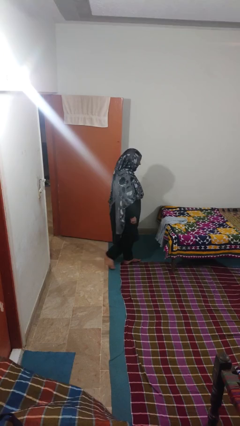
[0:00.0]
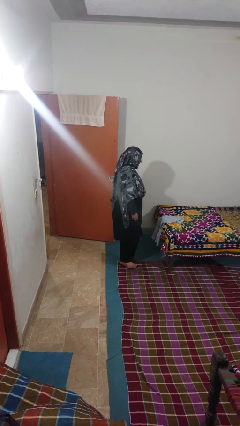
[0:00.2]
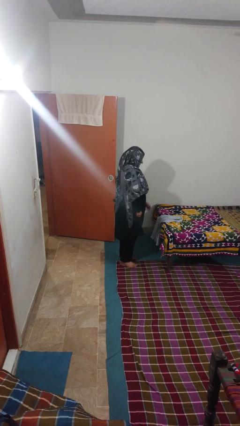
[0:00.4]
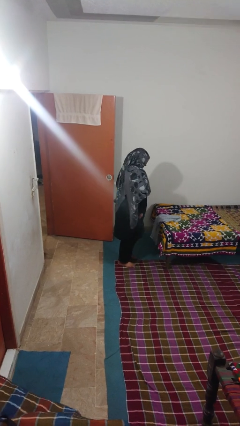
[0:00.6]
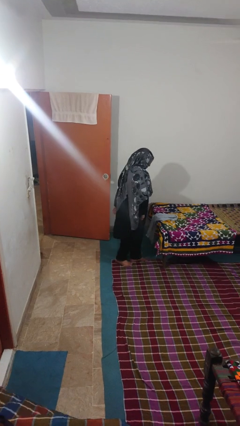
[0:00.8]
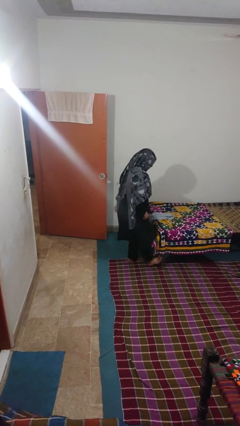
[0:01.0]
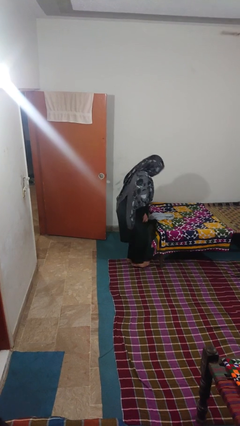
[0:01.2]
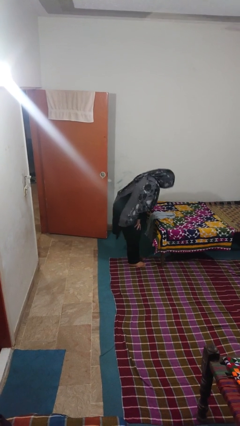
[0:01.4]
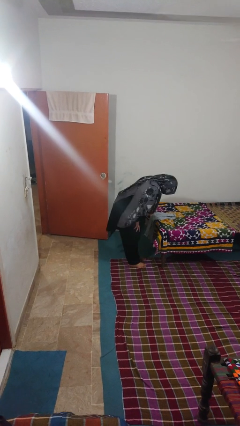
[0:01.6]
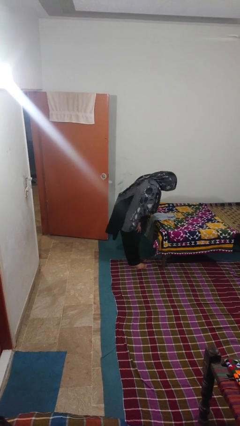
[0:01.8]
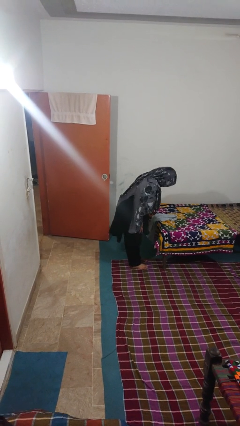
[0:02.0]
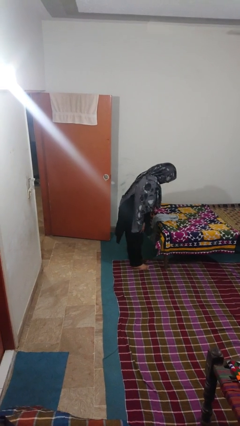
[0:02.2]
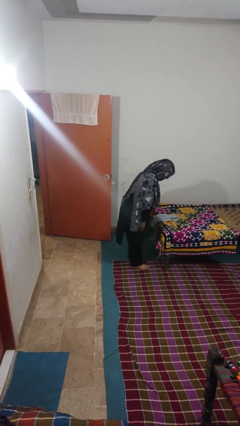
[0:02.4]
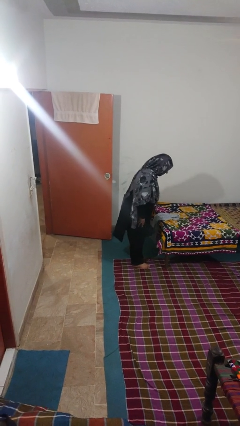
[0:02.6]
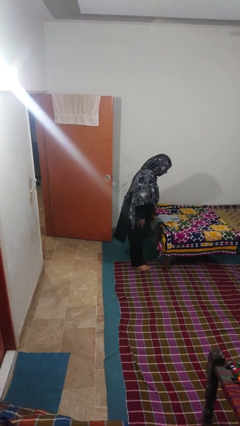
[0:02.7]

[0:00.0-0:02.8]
person stubs toe

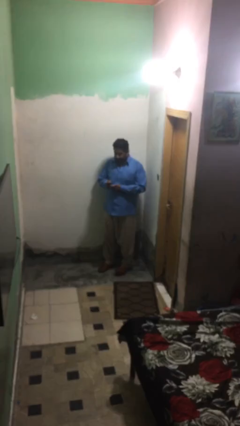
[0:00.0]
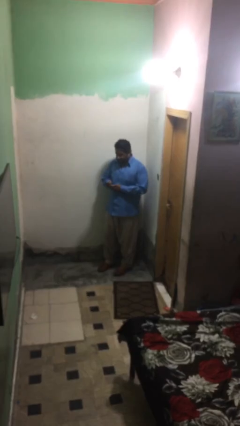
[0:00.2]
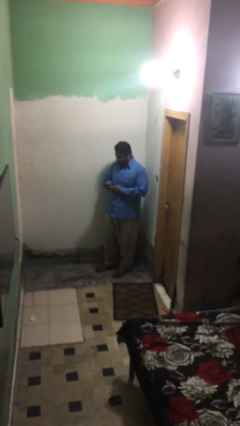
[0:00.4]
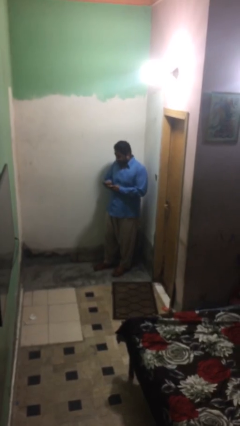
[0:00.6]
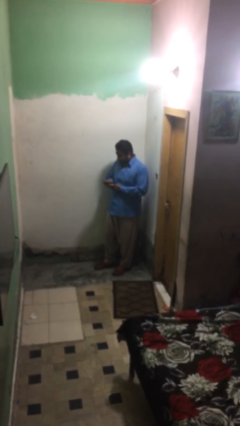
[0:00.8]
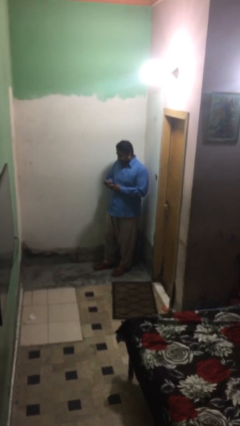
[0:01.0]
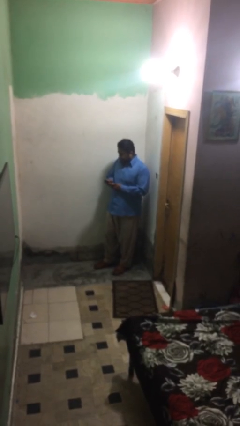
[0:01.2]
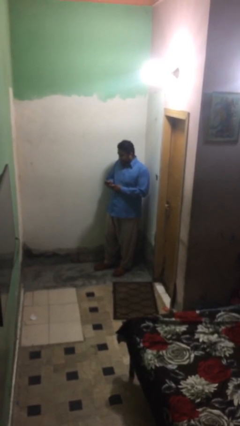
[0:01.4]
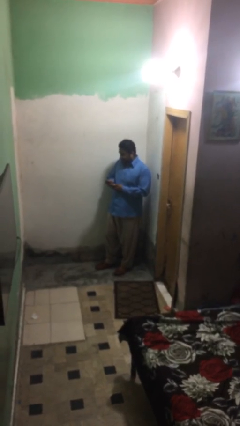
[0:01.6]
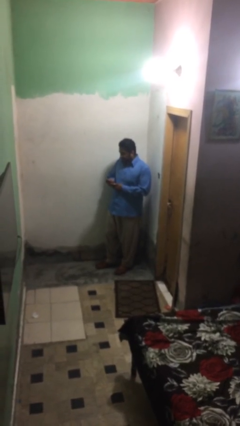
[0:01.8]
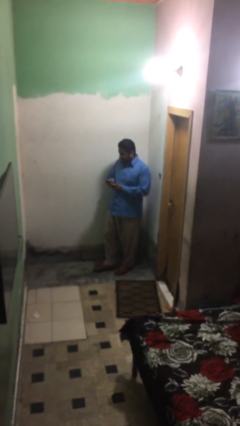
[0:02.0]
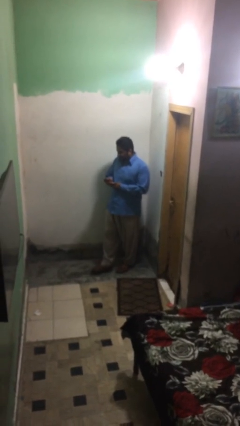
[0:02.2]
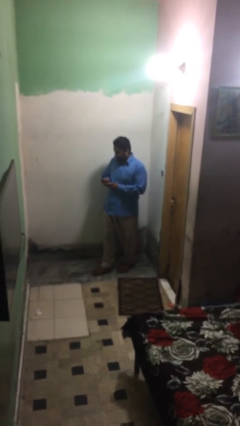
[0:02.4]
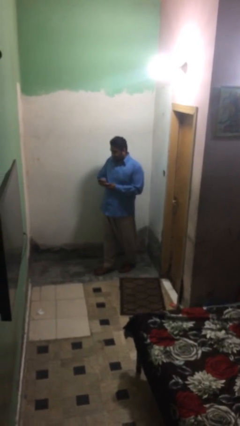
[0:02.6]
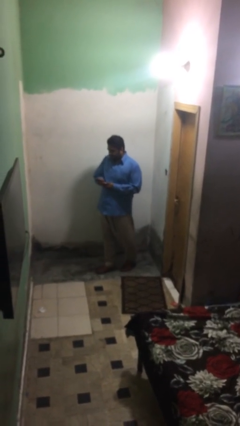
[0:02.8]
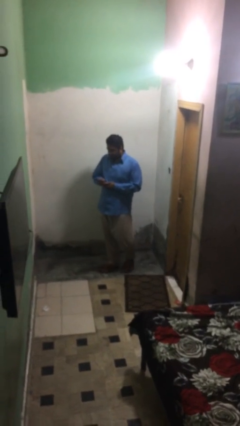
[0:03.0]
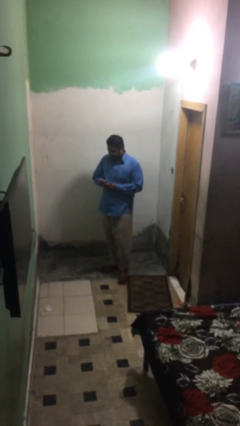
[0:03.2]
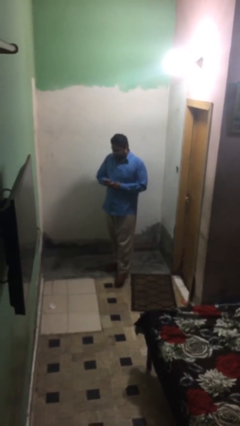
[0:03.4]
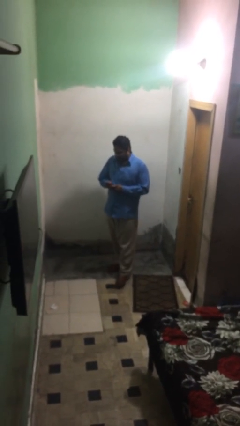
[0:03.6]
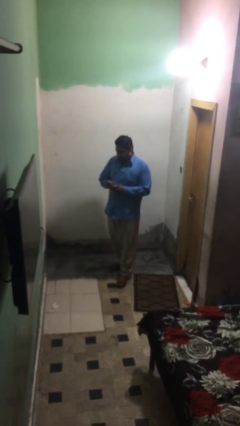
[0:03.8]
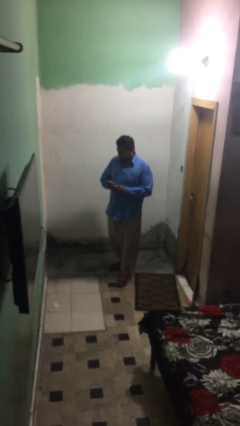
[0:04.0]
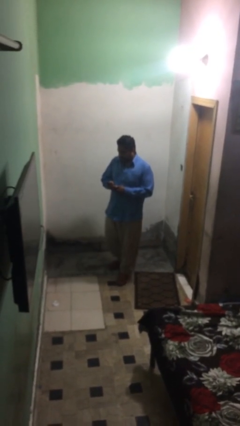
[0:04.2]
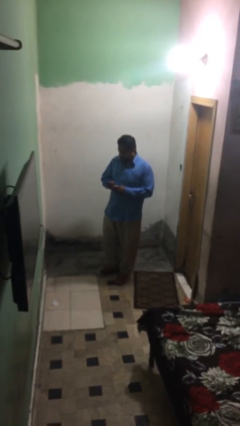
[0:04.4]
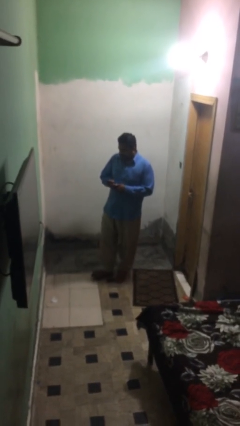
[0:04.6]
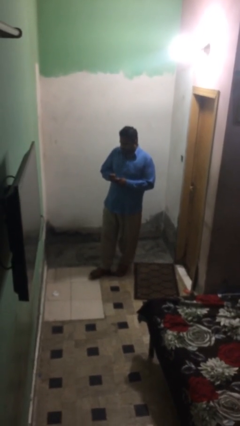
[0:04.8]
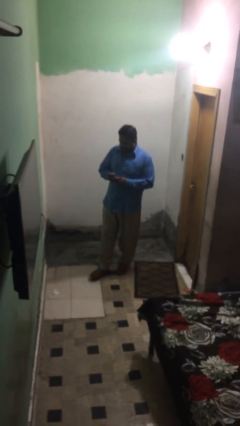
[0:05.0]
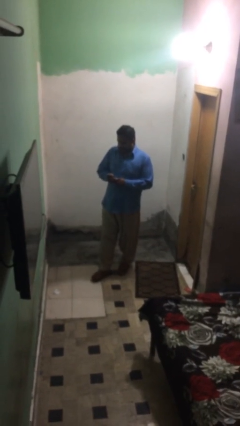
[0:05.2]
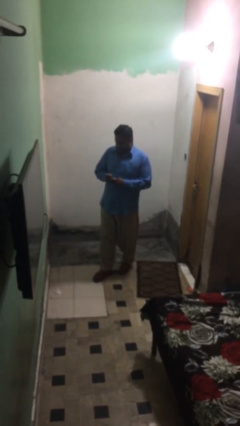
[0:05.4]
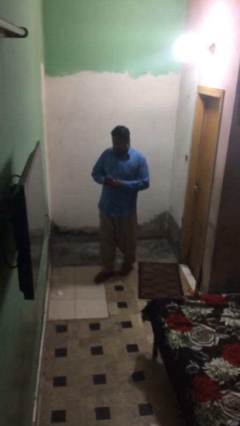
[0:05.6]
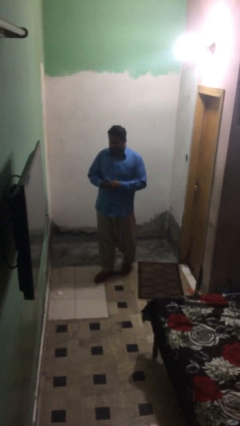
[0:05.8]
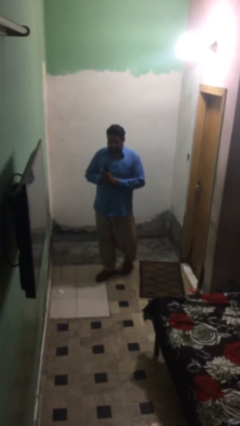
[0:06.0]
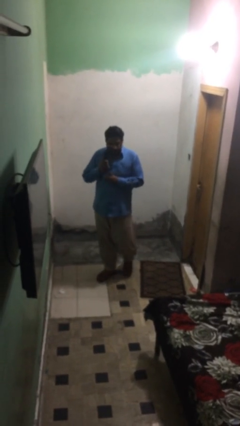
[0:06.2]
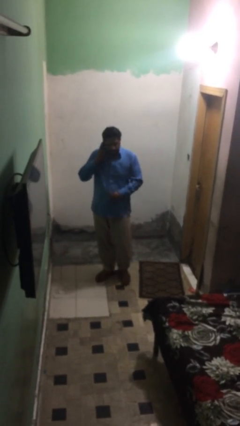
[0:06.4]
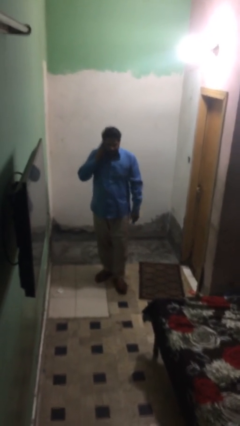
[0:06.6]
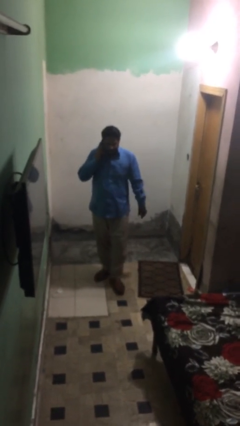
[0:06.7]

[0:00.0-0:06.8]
person texts on phone

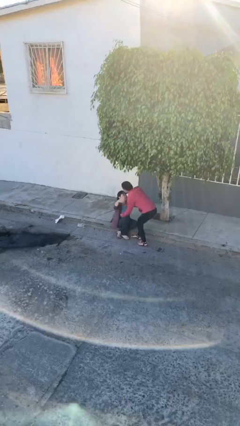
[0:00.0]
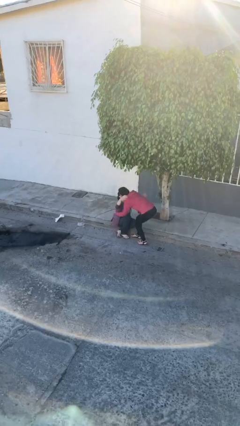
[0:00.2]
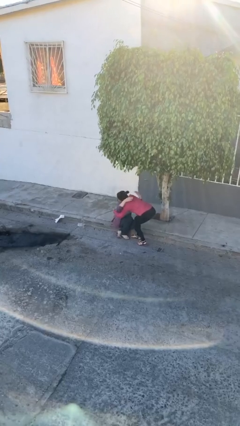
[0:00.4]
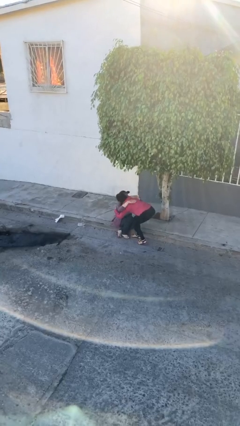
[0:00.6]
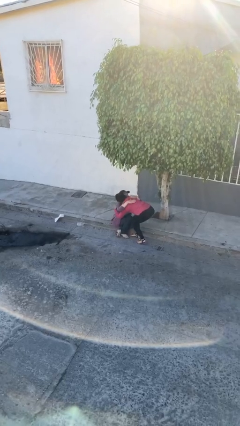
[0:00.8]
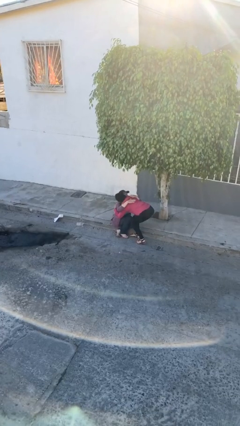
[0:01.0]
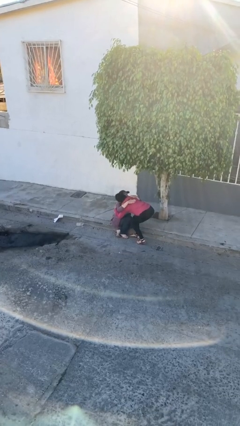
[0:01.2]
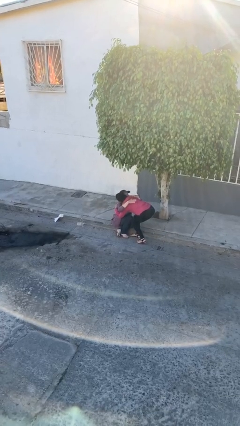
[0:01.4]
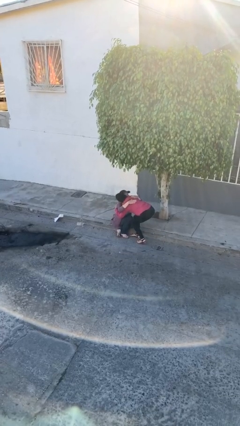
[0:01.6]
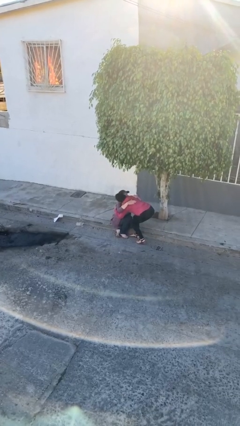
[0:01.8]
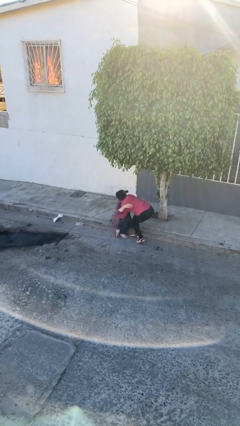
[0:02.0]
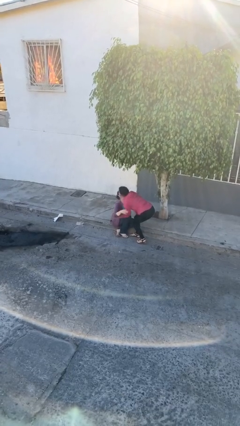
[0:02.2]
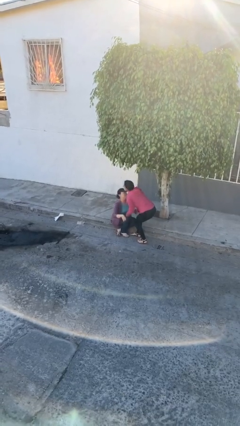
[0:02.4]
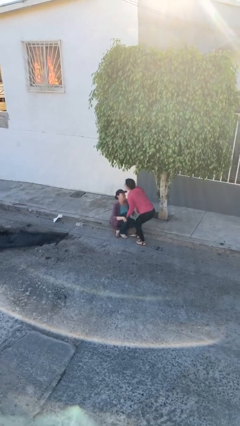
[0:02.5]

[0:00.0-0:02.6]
person embraces person

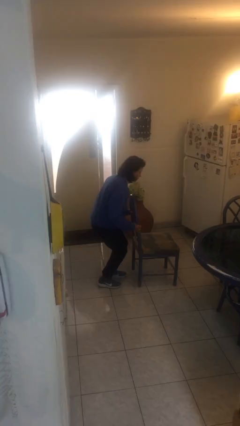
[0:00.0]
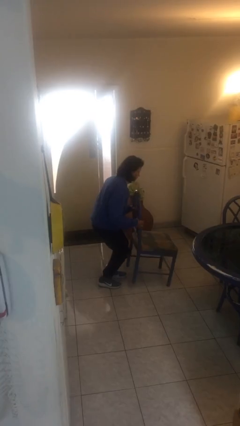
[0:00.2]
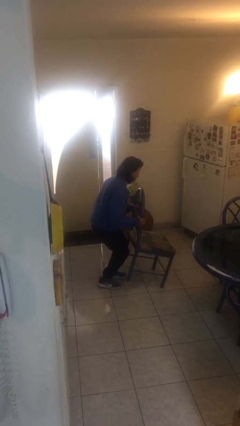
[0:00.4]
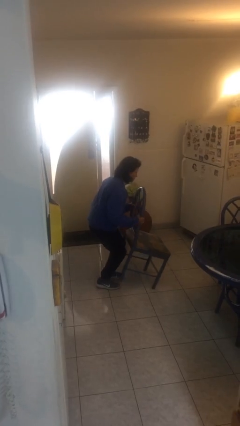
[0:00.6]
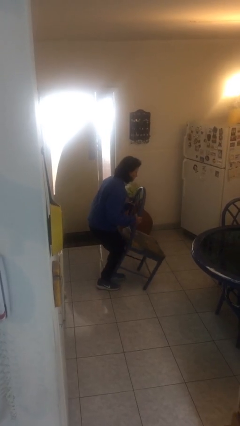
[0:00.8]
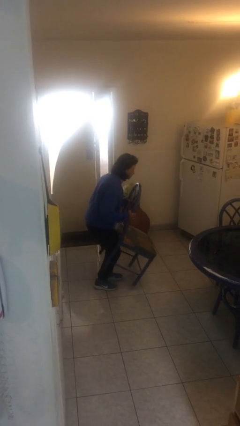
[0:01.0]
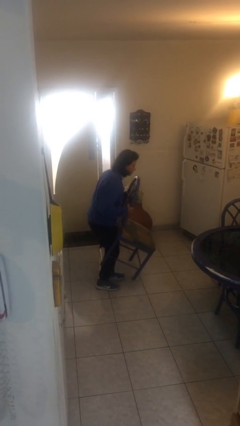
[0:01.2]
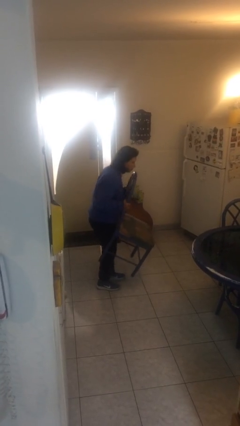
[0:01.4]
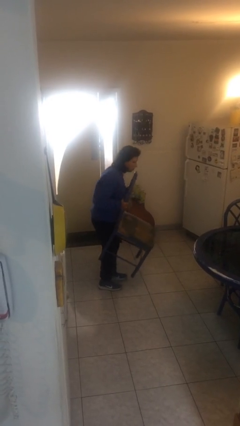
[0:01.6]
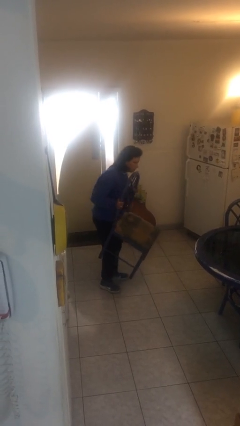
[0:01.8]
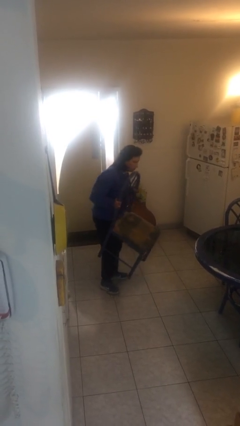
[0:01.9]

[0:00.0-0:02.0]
person picks up object from floor

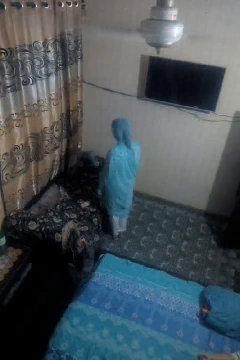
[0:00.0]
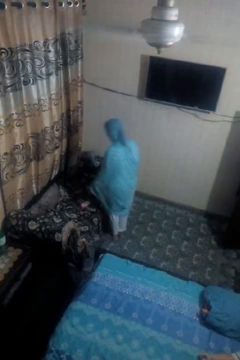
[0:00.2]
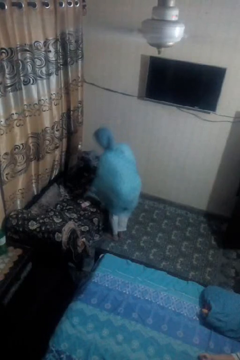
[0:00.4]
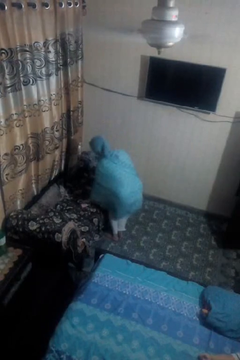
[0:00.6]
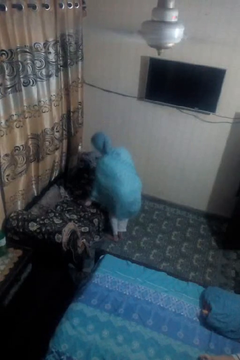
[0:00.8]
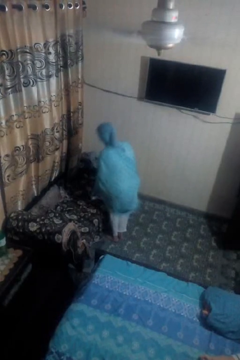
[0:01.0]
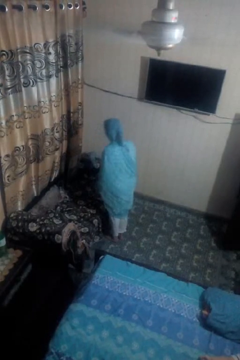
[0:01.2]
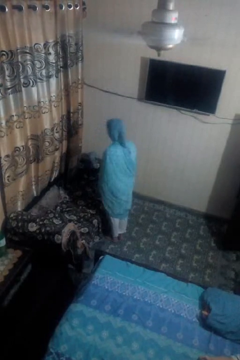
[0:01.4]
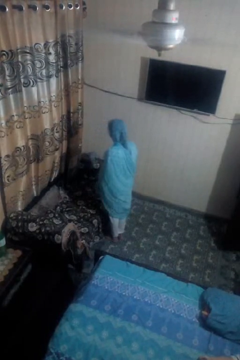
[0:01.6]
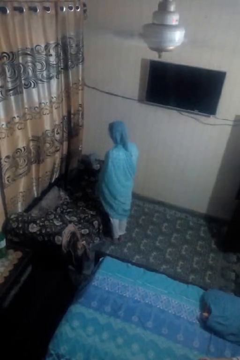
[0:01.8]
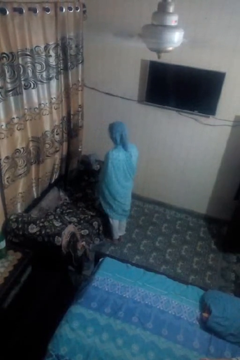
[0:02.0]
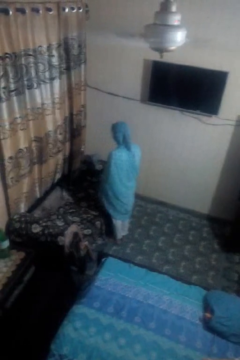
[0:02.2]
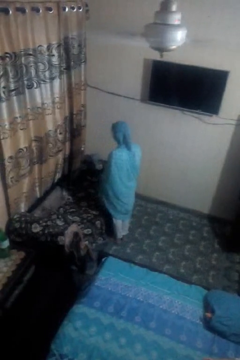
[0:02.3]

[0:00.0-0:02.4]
person picks up object from couch

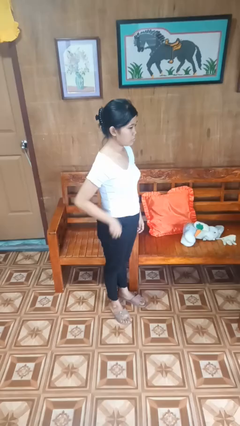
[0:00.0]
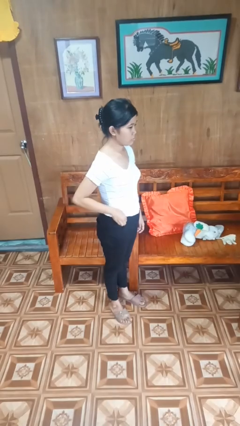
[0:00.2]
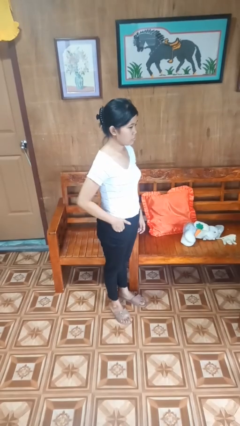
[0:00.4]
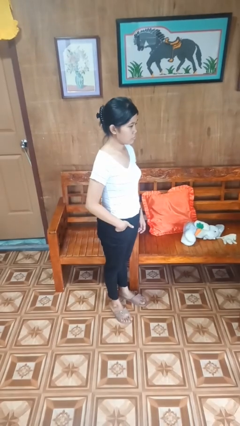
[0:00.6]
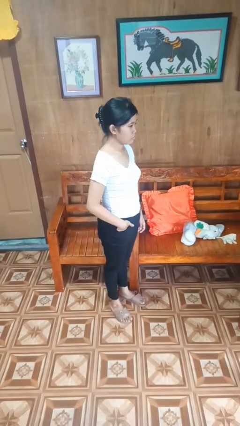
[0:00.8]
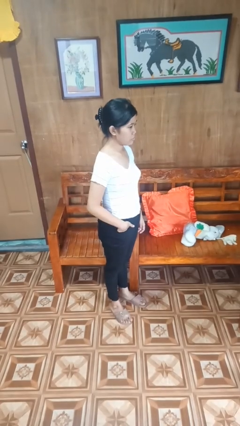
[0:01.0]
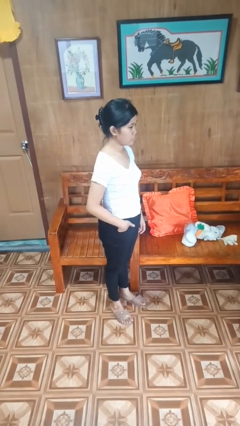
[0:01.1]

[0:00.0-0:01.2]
person puts hands in back pockets
